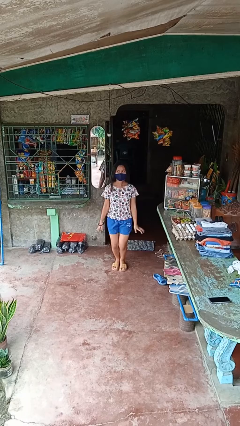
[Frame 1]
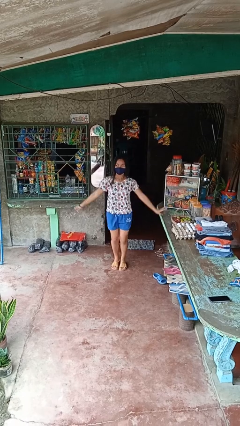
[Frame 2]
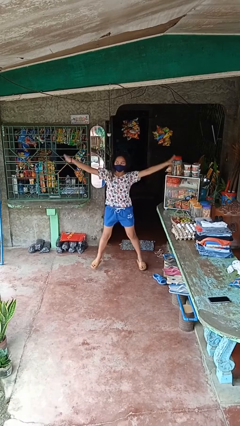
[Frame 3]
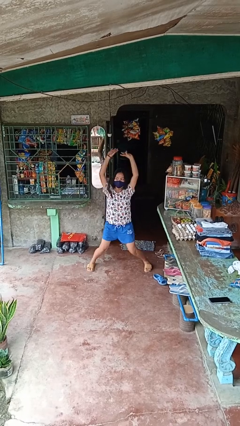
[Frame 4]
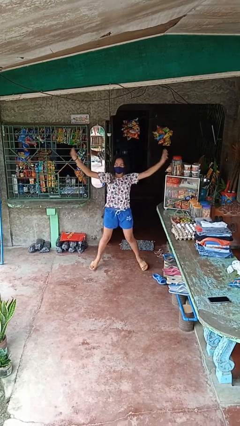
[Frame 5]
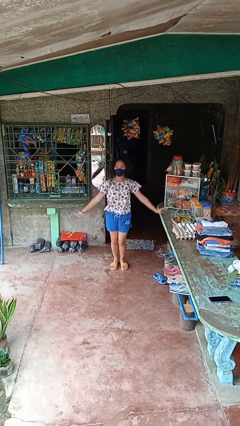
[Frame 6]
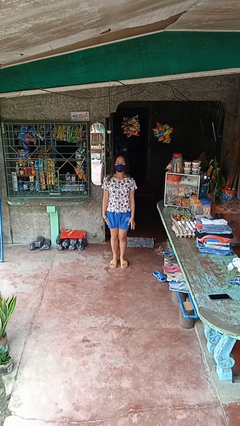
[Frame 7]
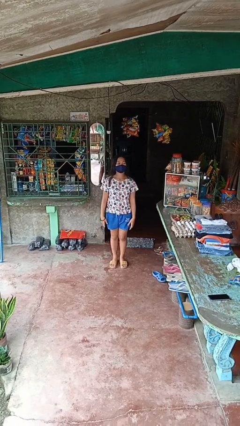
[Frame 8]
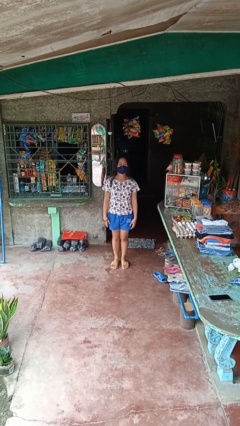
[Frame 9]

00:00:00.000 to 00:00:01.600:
person exercises with jumping jacks

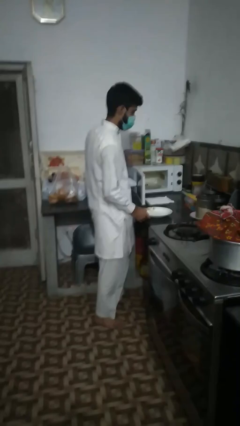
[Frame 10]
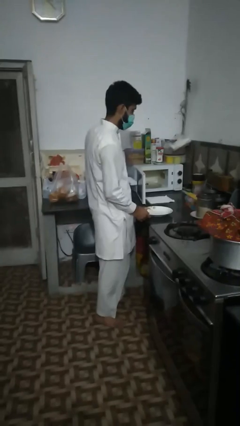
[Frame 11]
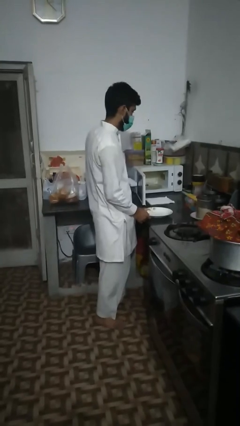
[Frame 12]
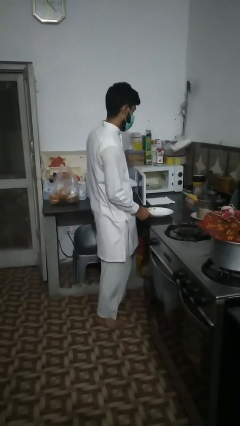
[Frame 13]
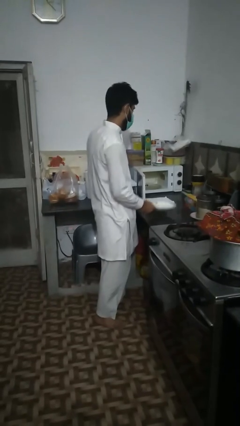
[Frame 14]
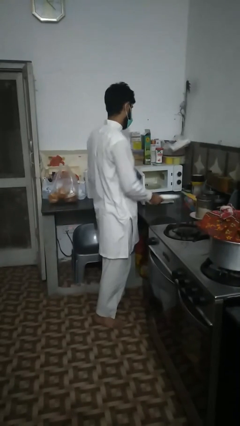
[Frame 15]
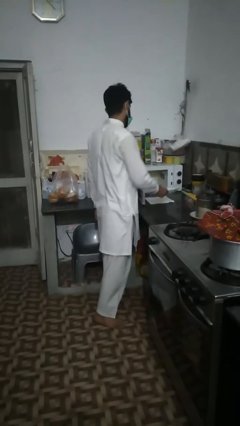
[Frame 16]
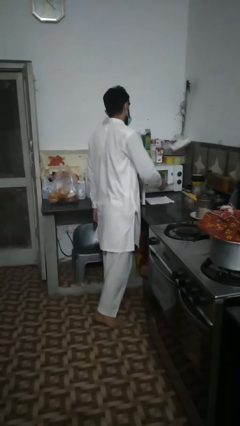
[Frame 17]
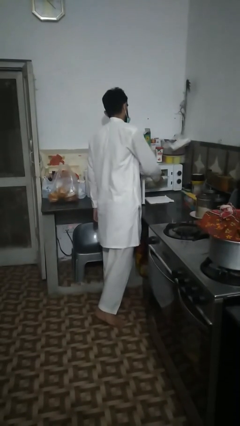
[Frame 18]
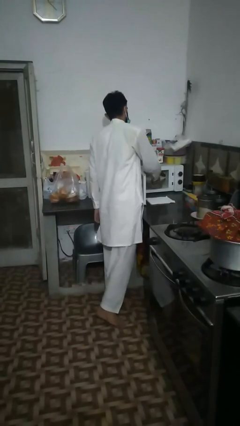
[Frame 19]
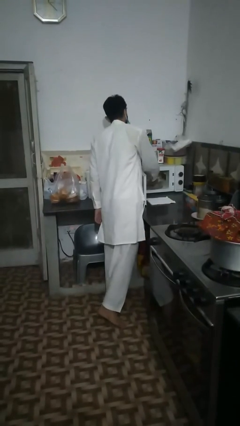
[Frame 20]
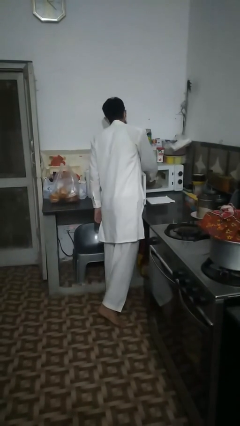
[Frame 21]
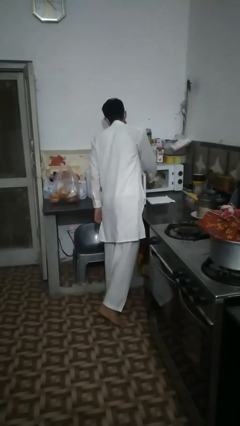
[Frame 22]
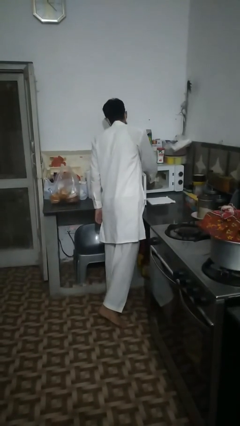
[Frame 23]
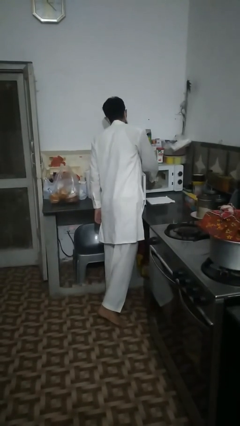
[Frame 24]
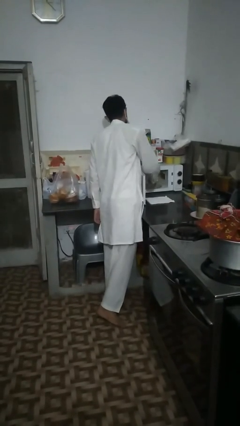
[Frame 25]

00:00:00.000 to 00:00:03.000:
person puts object into microwave

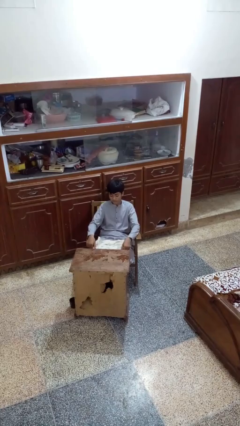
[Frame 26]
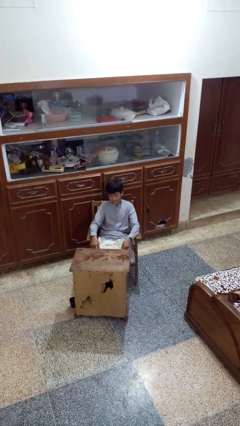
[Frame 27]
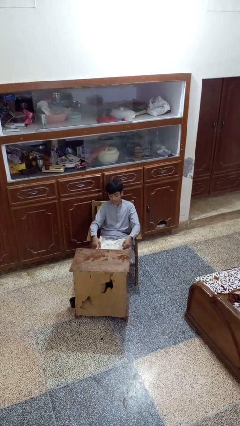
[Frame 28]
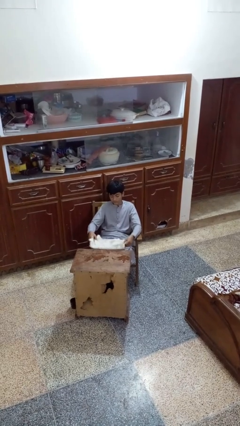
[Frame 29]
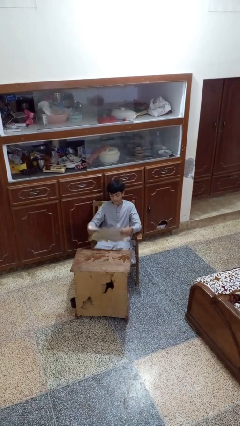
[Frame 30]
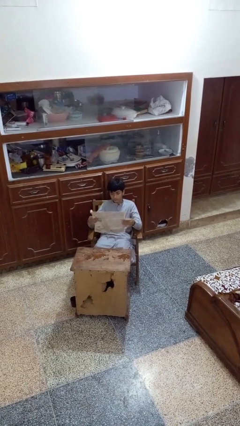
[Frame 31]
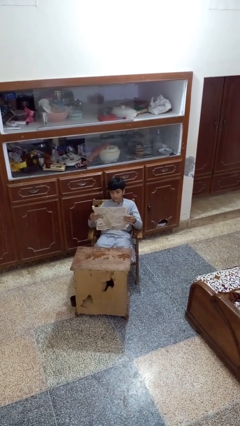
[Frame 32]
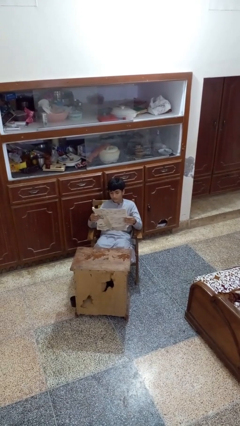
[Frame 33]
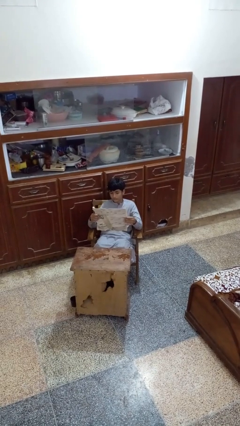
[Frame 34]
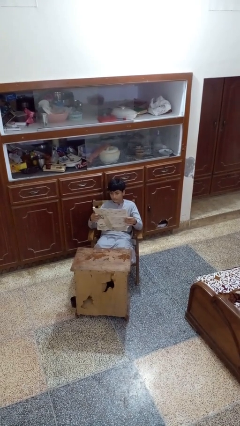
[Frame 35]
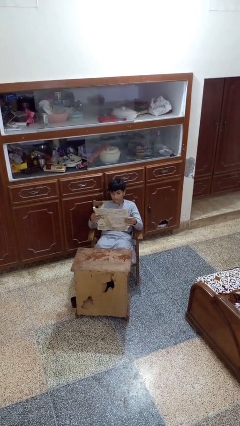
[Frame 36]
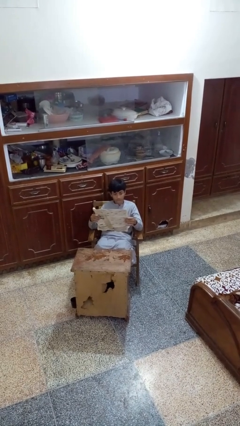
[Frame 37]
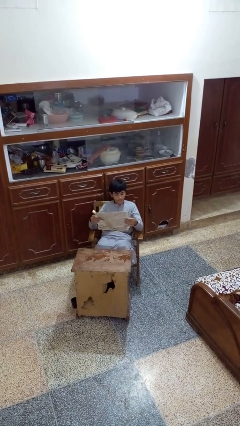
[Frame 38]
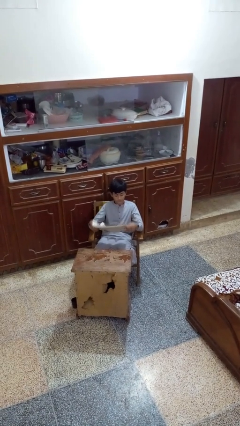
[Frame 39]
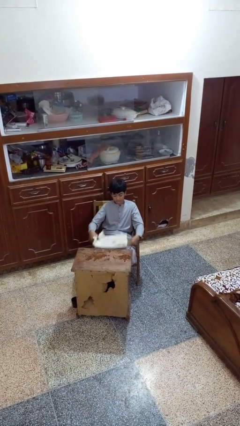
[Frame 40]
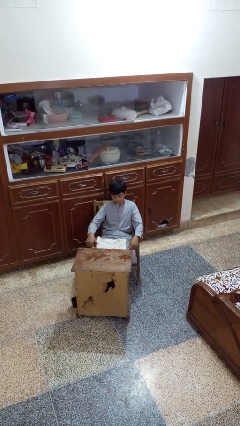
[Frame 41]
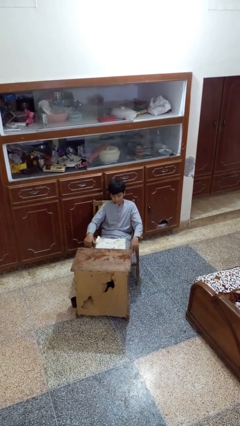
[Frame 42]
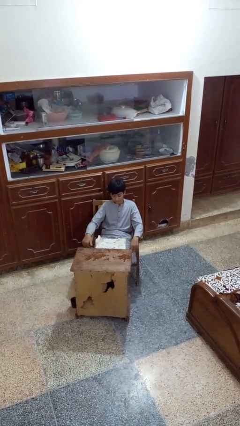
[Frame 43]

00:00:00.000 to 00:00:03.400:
person reads newspaper

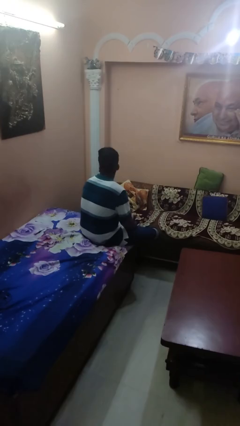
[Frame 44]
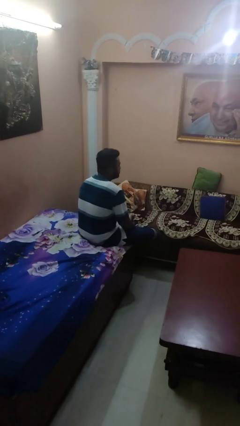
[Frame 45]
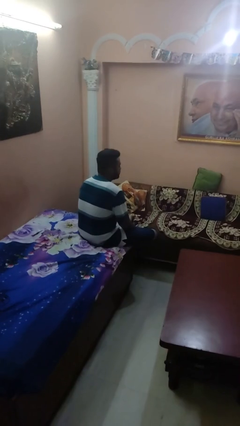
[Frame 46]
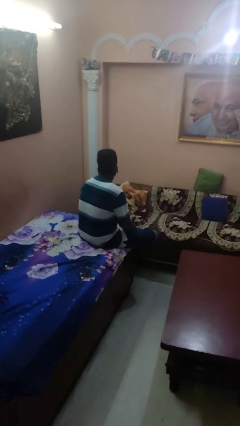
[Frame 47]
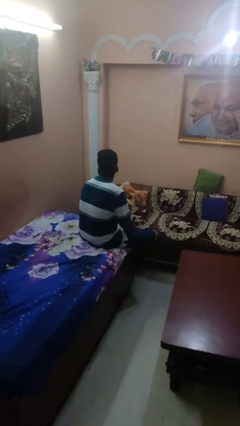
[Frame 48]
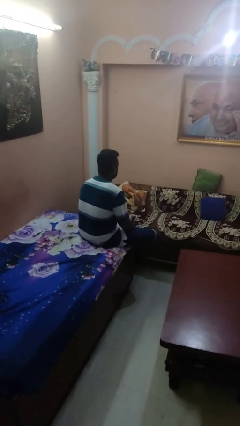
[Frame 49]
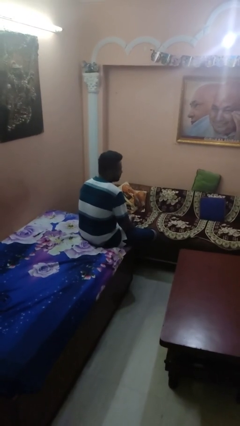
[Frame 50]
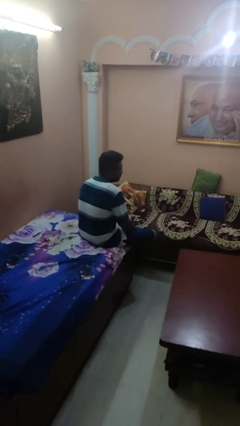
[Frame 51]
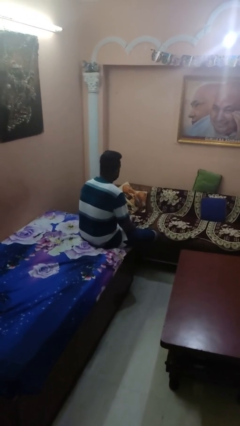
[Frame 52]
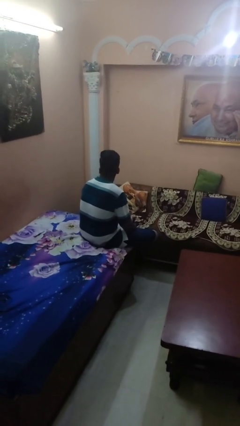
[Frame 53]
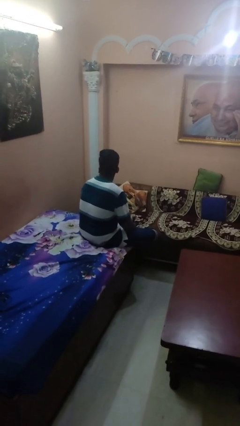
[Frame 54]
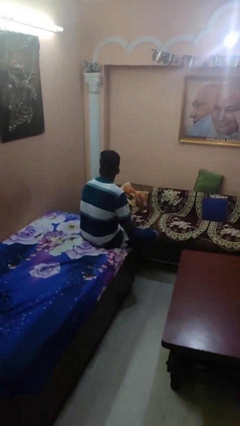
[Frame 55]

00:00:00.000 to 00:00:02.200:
person shakes head

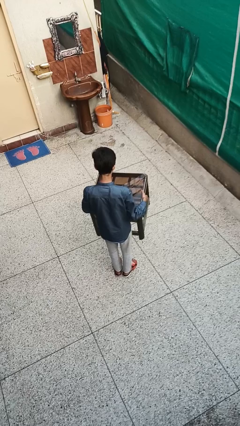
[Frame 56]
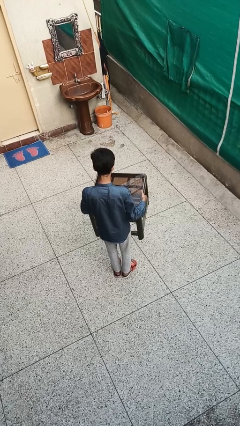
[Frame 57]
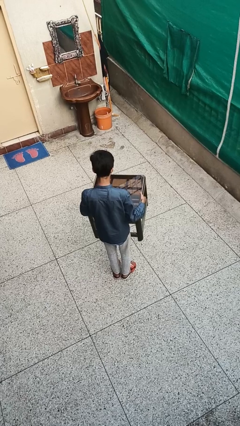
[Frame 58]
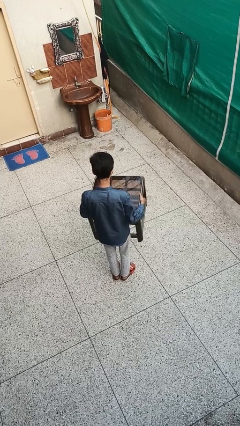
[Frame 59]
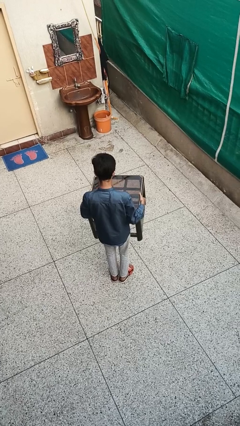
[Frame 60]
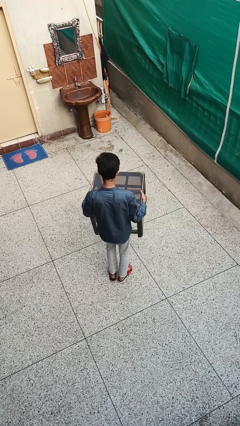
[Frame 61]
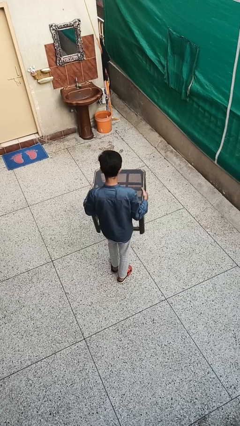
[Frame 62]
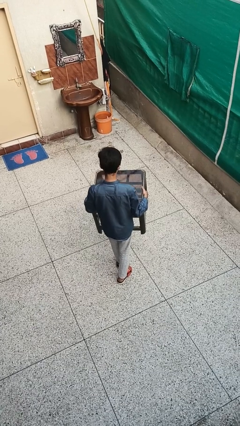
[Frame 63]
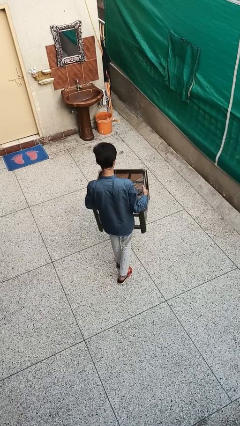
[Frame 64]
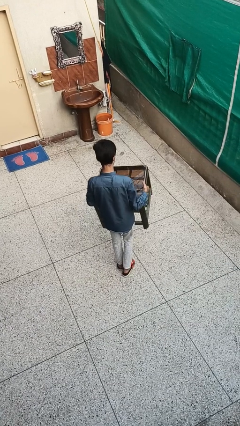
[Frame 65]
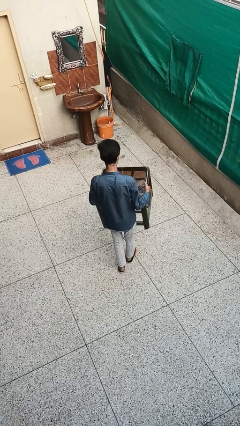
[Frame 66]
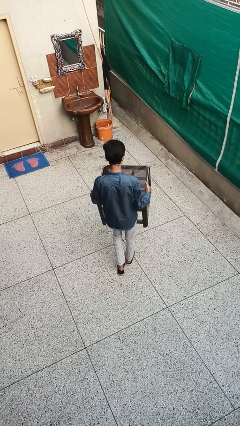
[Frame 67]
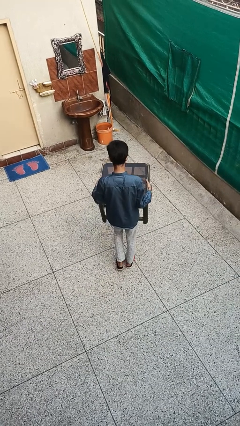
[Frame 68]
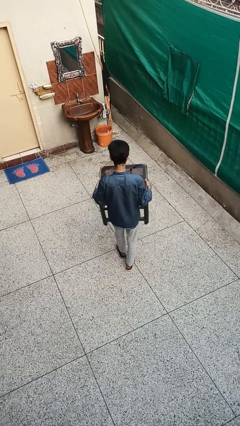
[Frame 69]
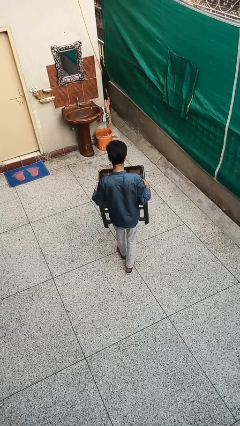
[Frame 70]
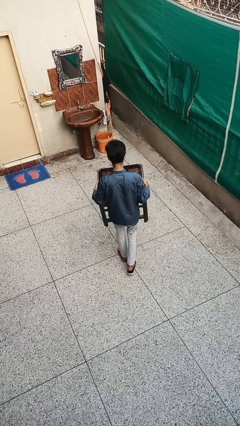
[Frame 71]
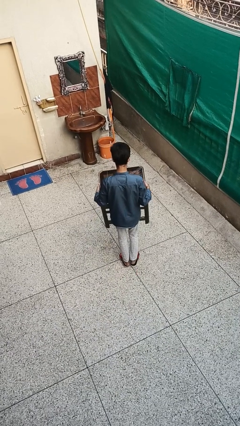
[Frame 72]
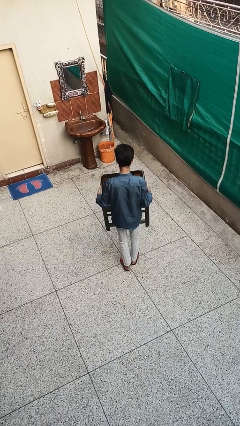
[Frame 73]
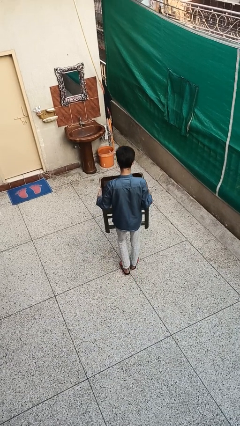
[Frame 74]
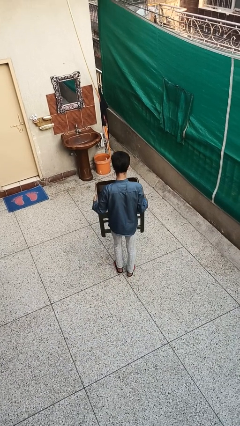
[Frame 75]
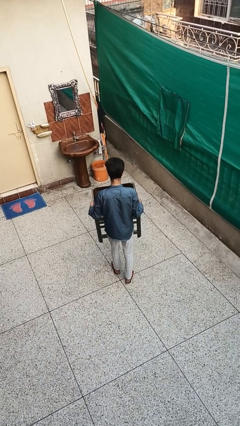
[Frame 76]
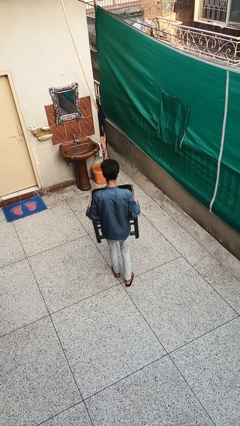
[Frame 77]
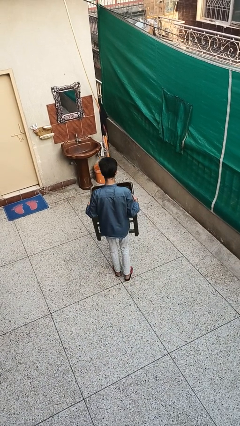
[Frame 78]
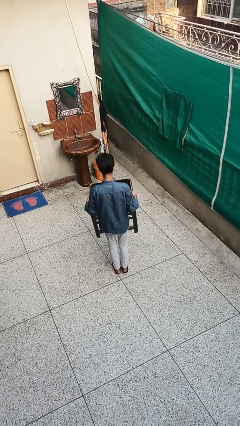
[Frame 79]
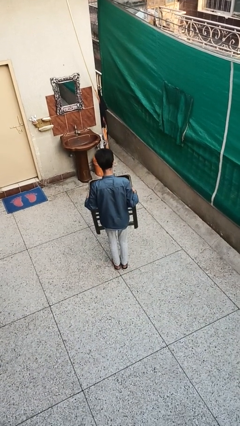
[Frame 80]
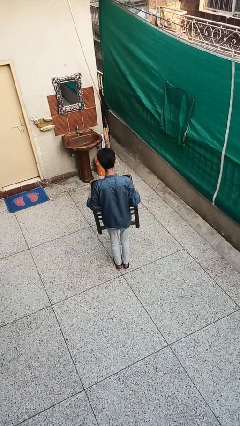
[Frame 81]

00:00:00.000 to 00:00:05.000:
person carries furniture

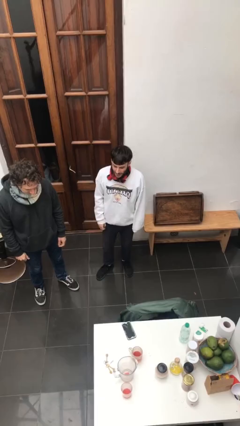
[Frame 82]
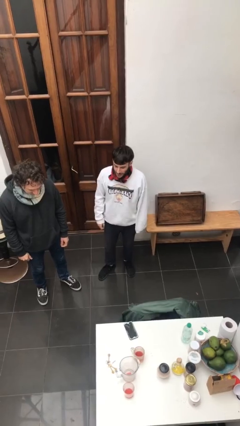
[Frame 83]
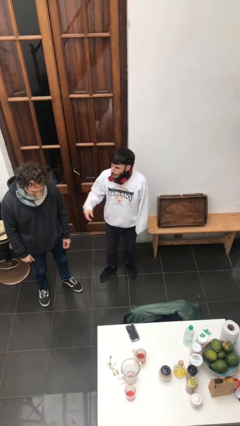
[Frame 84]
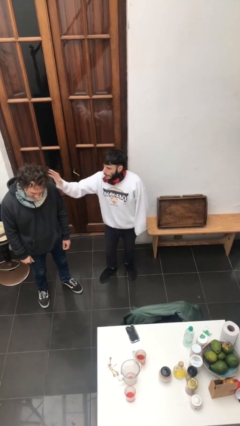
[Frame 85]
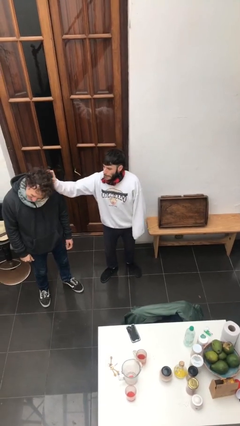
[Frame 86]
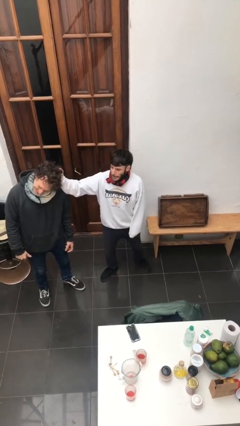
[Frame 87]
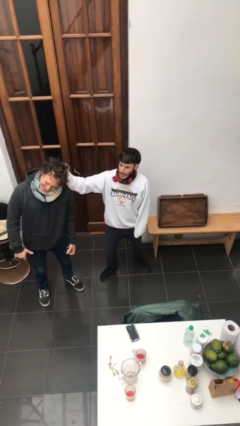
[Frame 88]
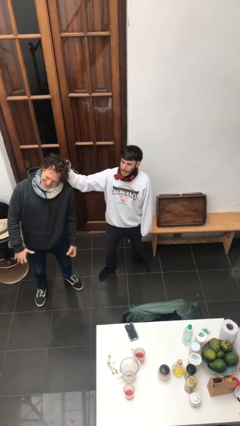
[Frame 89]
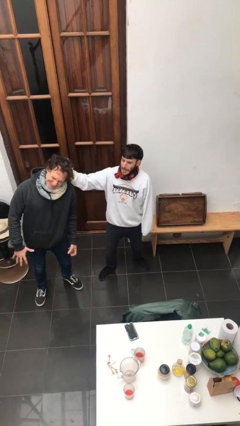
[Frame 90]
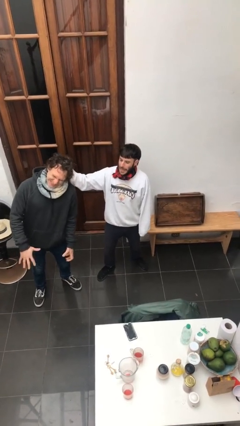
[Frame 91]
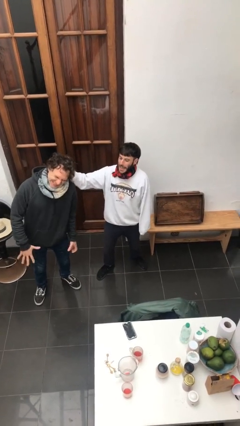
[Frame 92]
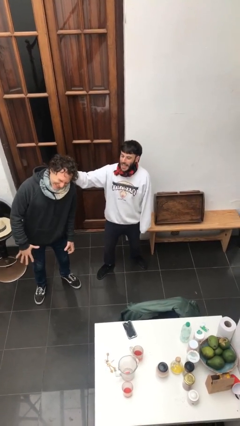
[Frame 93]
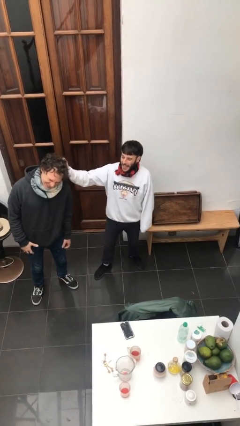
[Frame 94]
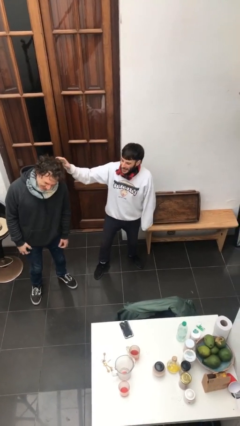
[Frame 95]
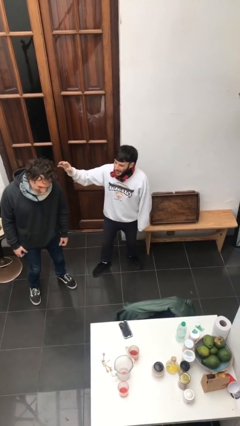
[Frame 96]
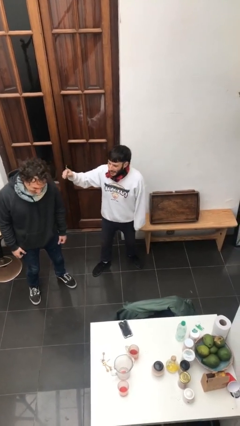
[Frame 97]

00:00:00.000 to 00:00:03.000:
person grabs person by hair
